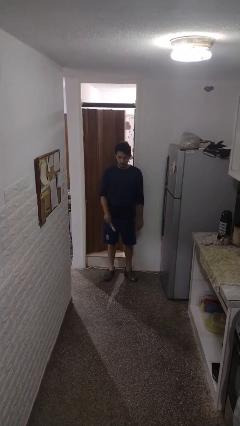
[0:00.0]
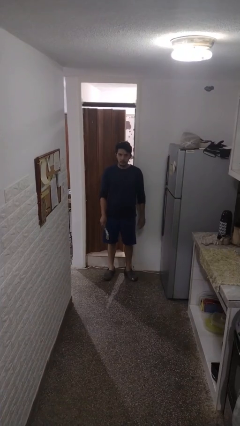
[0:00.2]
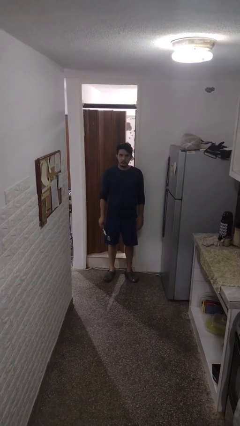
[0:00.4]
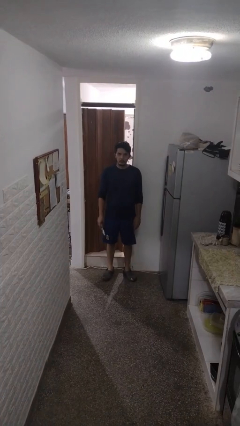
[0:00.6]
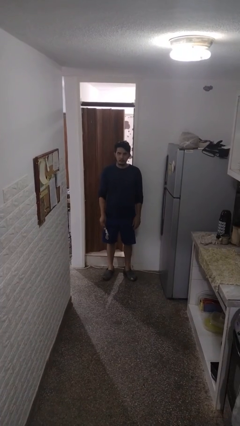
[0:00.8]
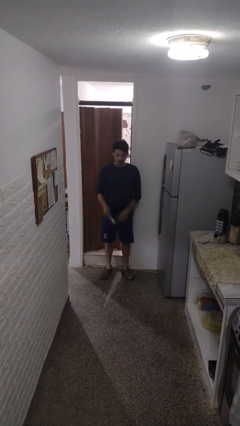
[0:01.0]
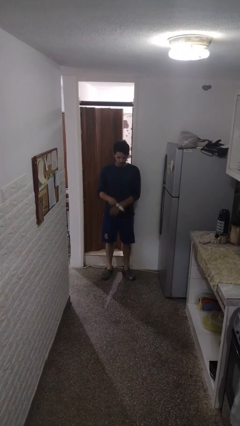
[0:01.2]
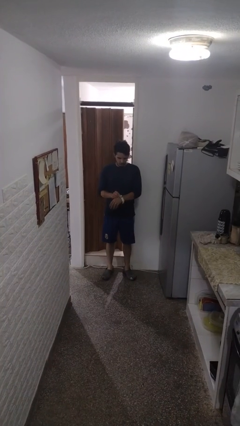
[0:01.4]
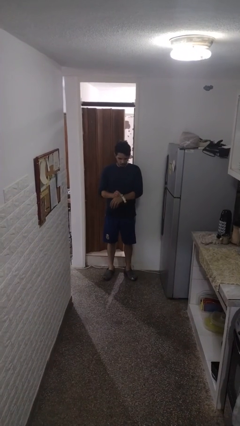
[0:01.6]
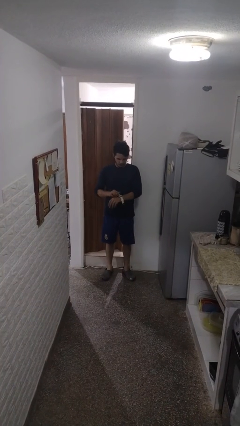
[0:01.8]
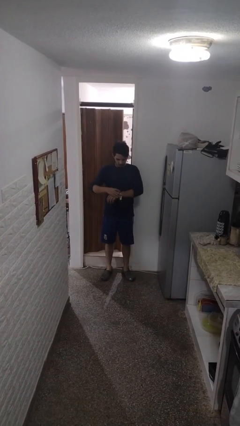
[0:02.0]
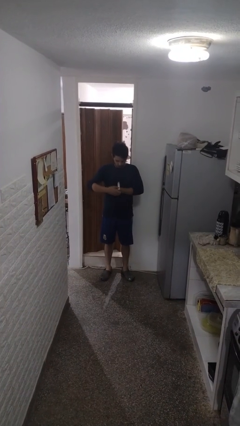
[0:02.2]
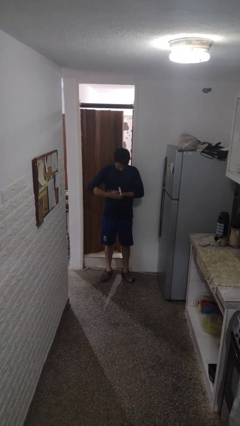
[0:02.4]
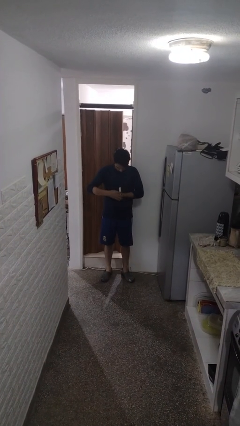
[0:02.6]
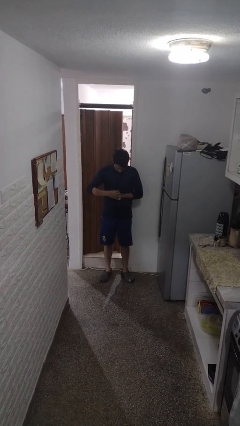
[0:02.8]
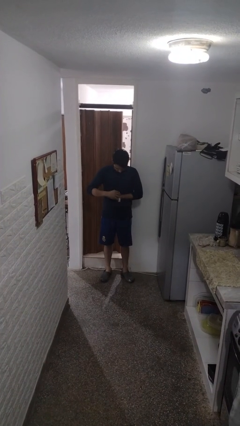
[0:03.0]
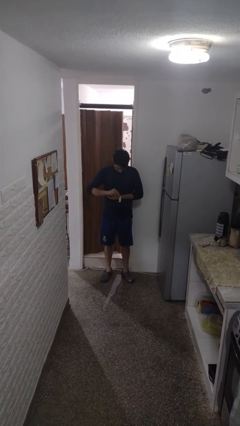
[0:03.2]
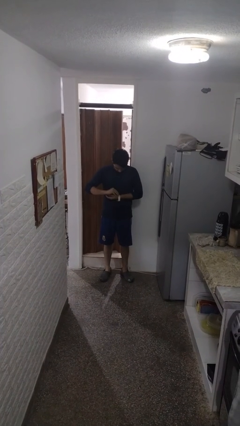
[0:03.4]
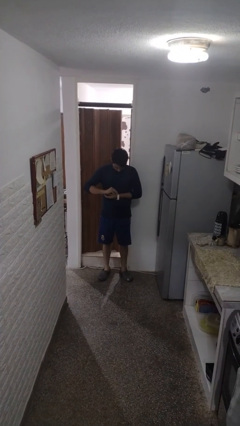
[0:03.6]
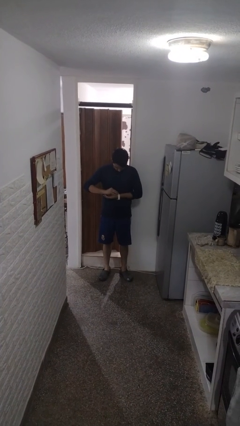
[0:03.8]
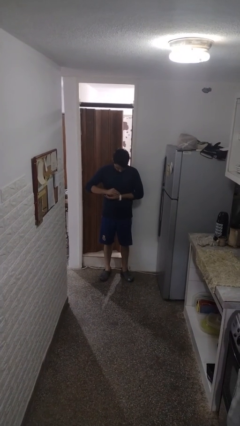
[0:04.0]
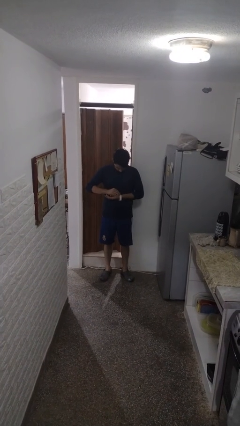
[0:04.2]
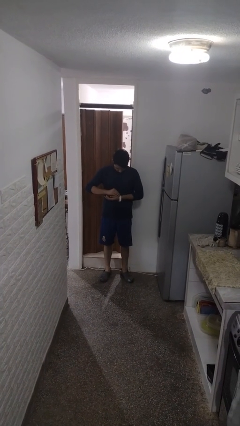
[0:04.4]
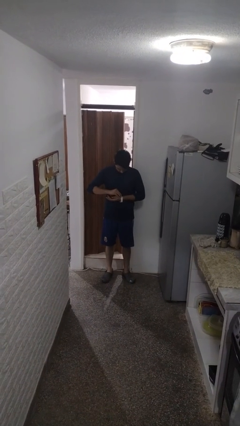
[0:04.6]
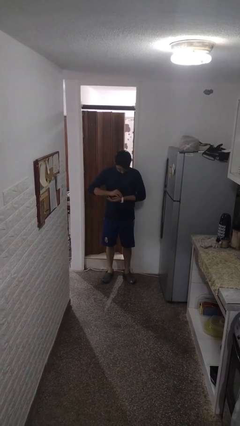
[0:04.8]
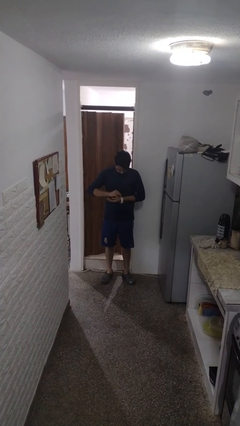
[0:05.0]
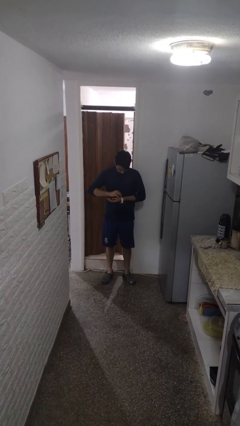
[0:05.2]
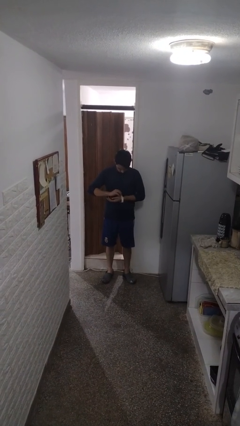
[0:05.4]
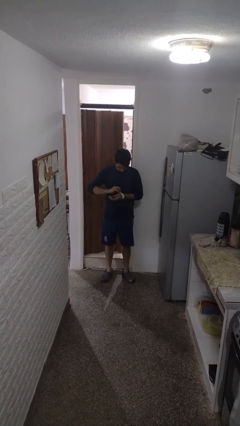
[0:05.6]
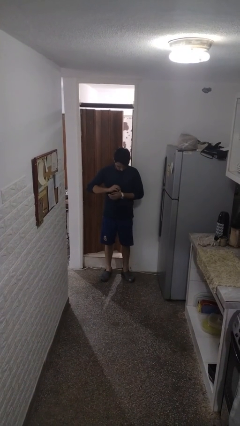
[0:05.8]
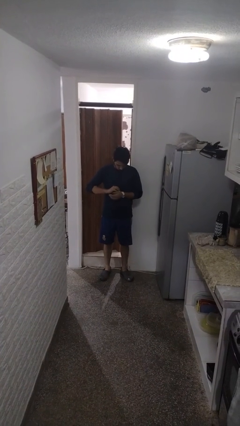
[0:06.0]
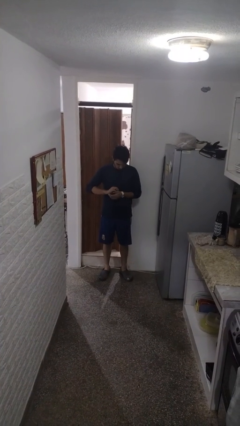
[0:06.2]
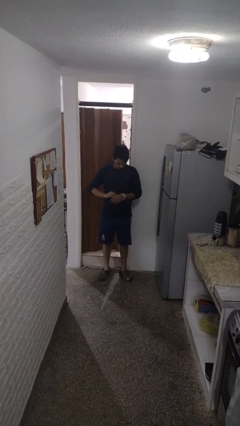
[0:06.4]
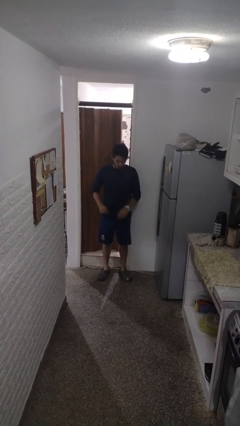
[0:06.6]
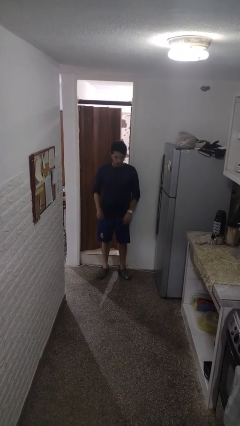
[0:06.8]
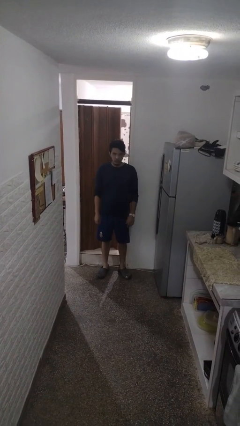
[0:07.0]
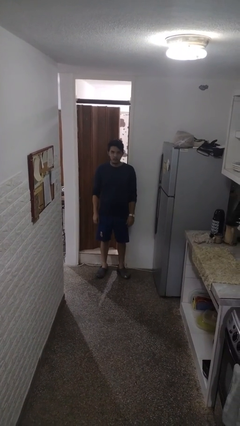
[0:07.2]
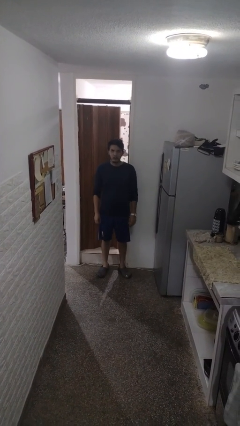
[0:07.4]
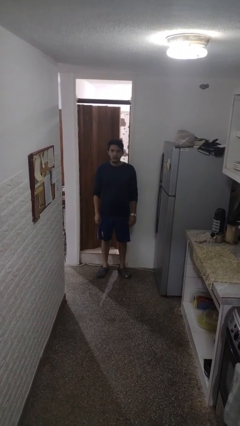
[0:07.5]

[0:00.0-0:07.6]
person puts on wristwatch

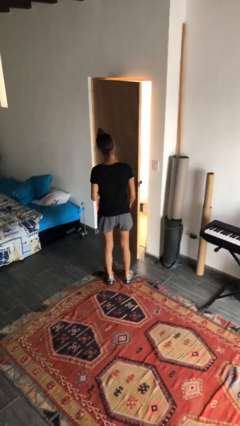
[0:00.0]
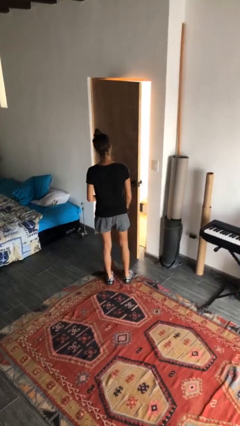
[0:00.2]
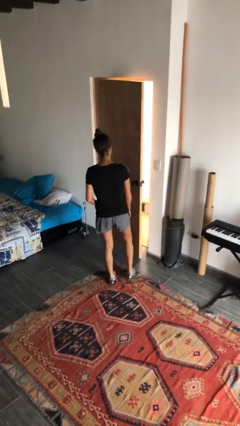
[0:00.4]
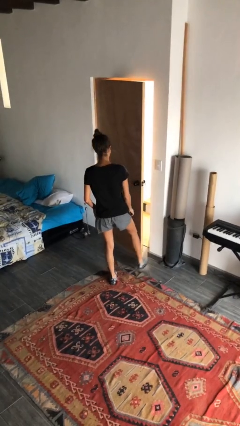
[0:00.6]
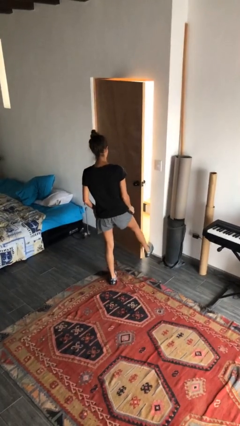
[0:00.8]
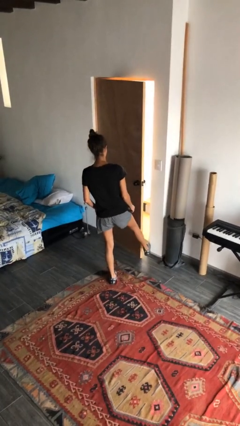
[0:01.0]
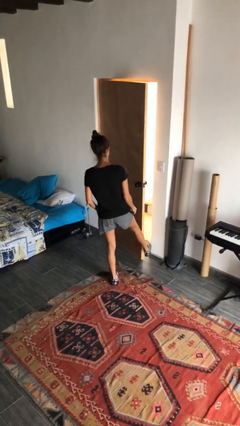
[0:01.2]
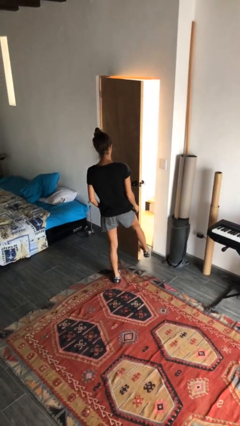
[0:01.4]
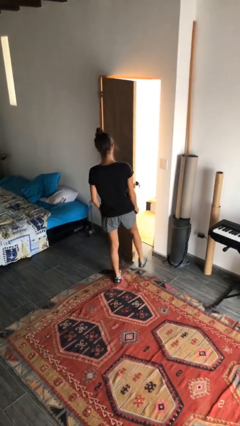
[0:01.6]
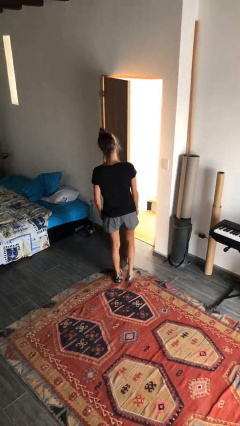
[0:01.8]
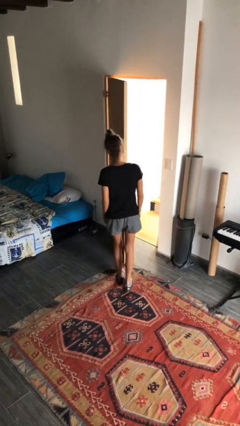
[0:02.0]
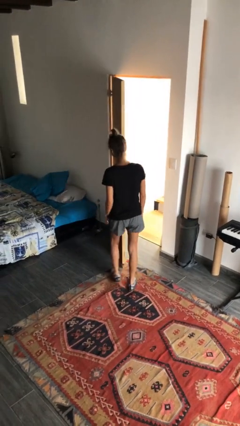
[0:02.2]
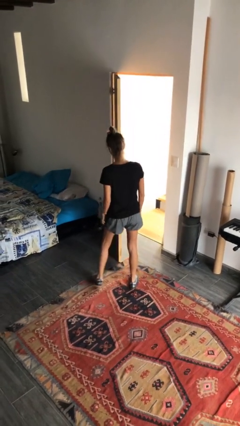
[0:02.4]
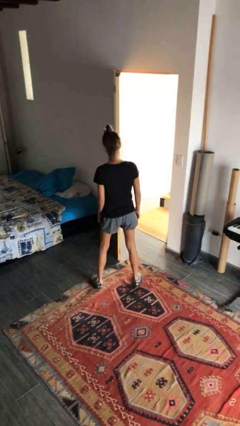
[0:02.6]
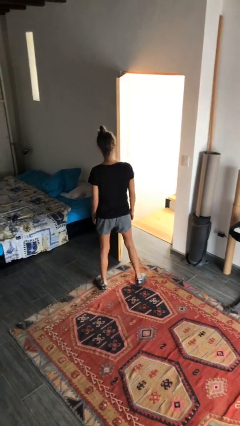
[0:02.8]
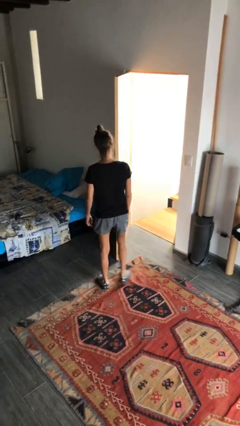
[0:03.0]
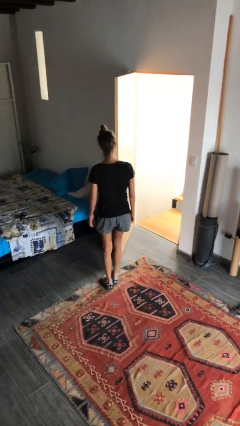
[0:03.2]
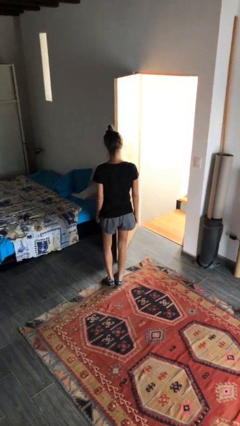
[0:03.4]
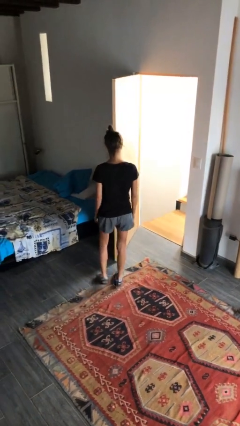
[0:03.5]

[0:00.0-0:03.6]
person opens facility door

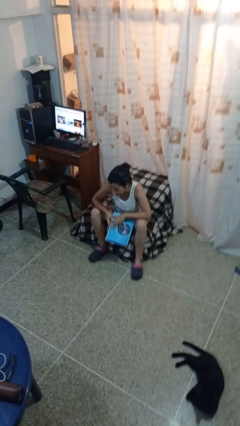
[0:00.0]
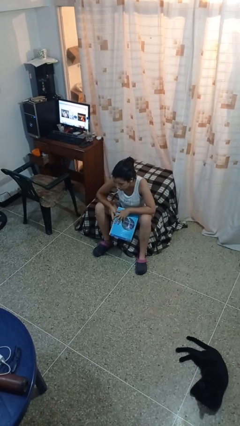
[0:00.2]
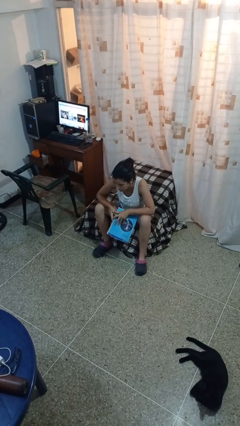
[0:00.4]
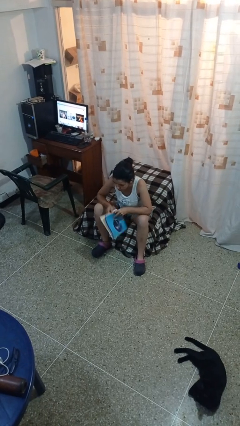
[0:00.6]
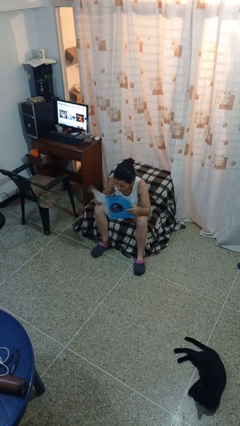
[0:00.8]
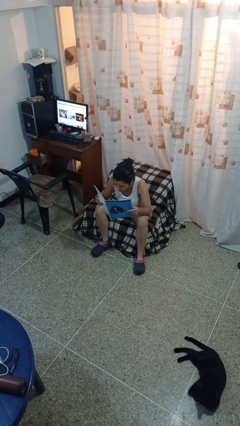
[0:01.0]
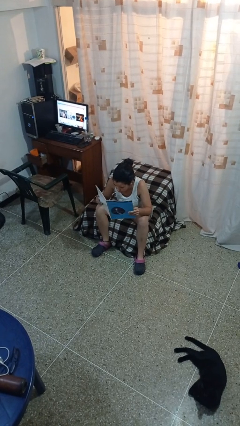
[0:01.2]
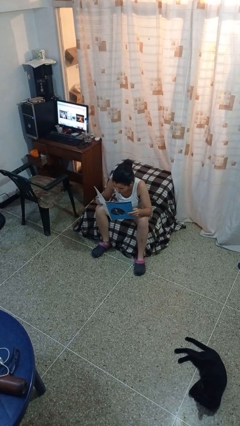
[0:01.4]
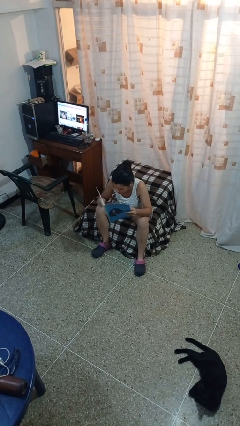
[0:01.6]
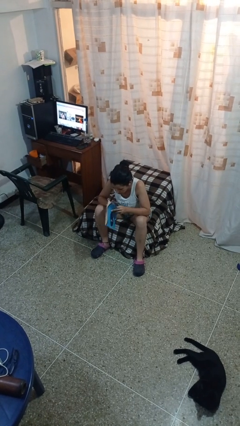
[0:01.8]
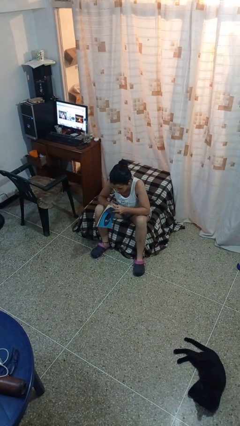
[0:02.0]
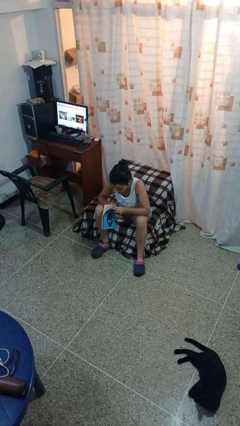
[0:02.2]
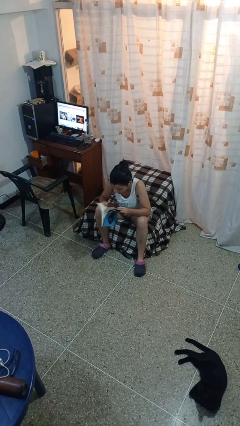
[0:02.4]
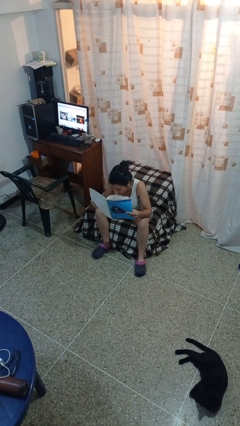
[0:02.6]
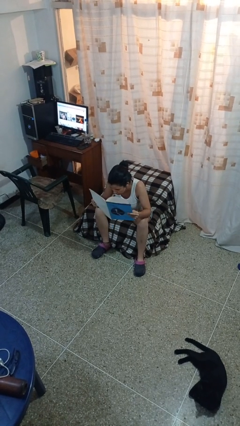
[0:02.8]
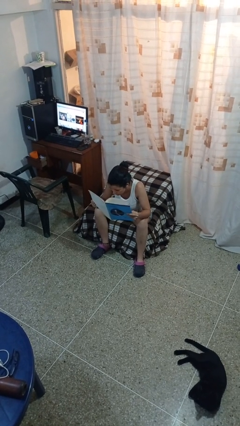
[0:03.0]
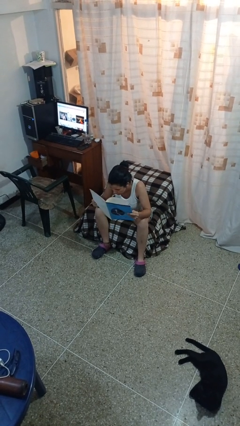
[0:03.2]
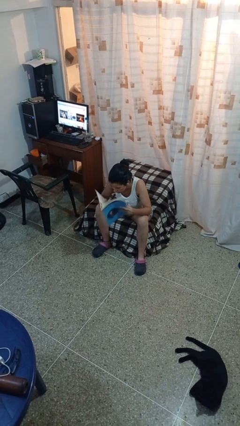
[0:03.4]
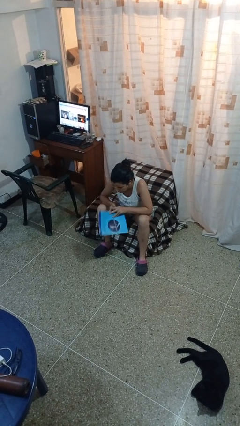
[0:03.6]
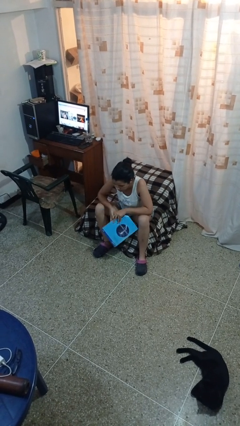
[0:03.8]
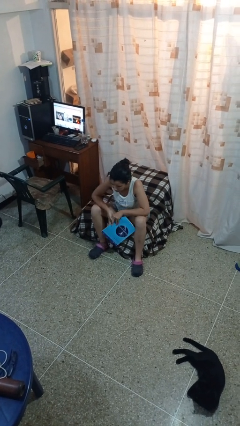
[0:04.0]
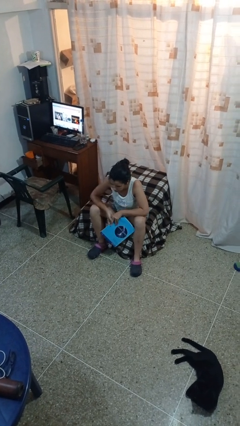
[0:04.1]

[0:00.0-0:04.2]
person reads magazine

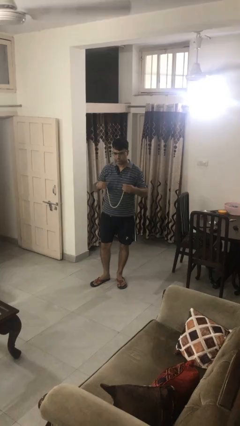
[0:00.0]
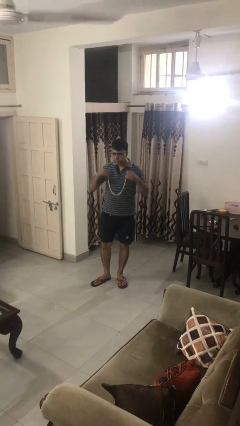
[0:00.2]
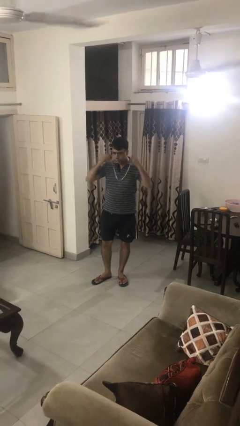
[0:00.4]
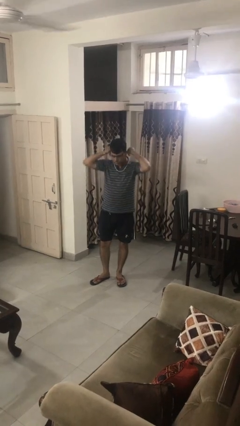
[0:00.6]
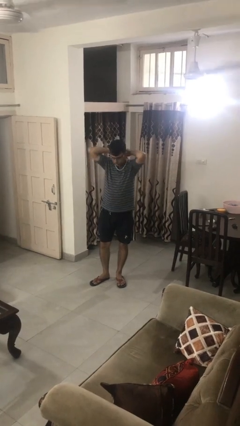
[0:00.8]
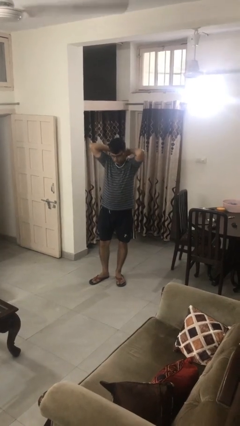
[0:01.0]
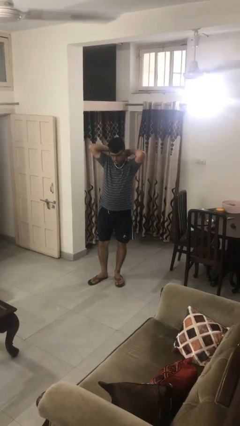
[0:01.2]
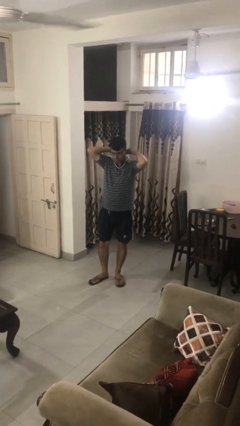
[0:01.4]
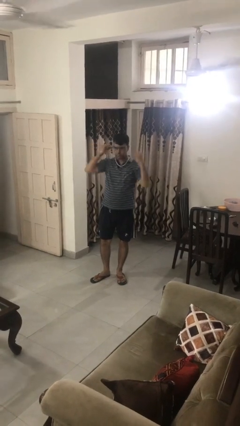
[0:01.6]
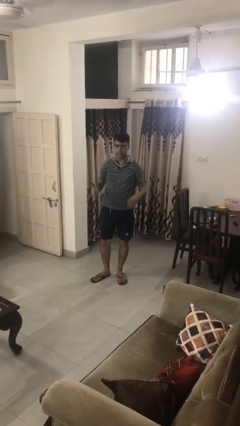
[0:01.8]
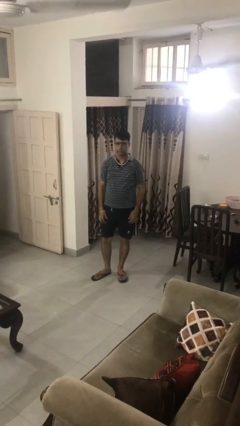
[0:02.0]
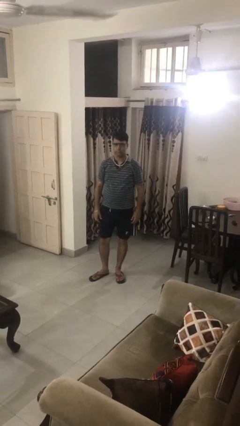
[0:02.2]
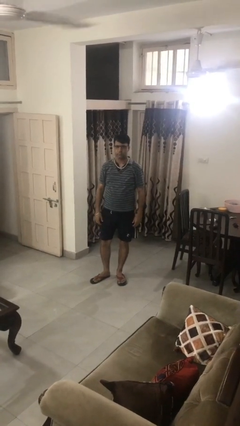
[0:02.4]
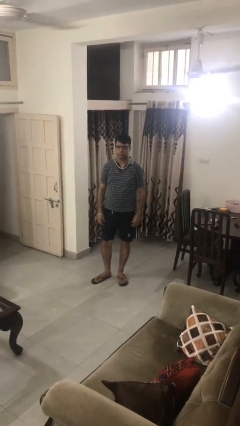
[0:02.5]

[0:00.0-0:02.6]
person puts on necklace
